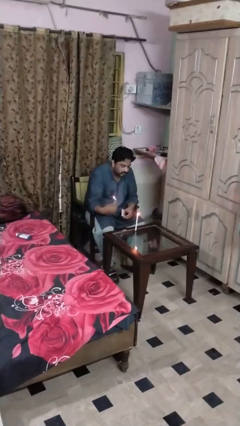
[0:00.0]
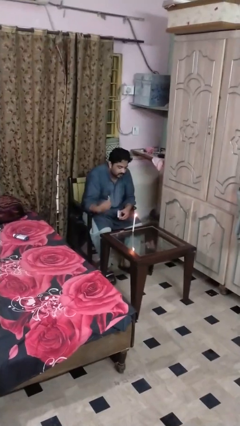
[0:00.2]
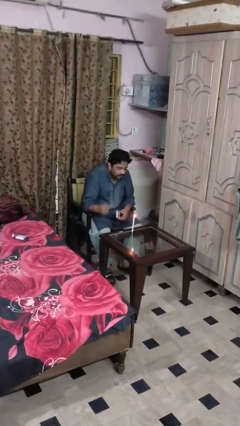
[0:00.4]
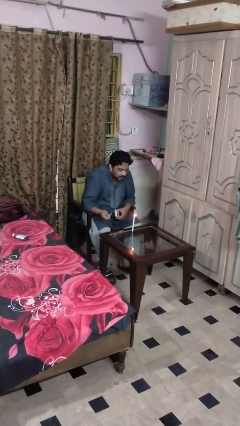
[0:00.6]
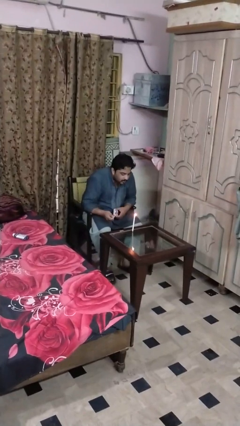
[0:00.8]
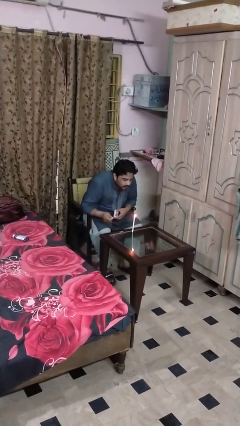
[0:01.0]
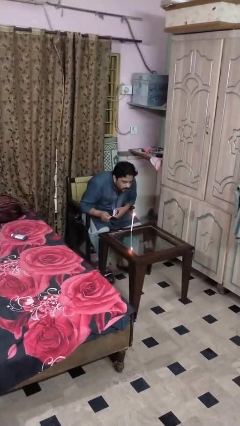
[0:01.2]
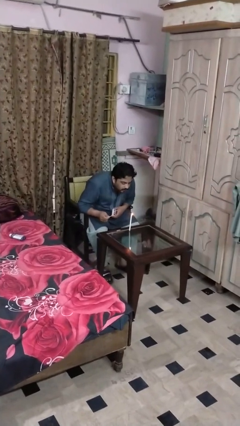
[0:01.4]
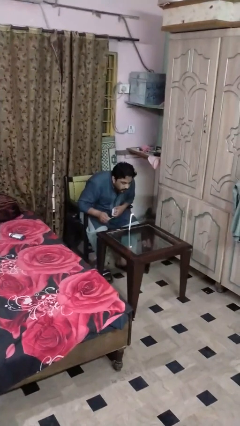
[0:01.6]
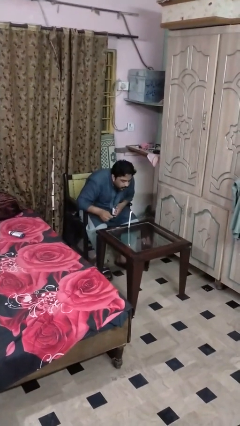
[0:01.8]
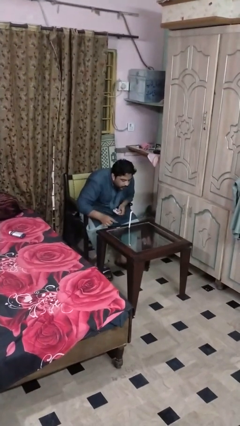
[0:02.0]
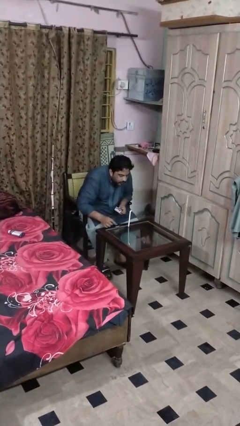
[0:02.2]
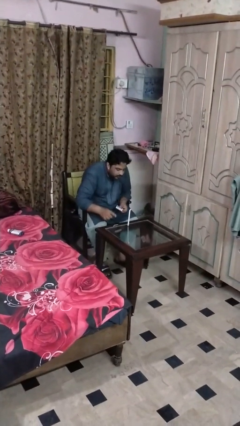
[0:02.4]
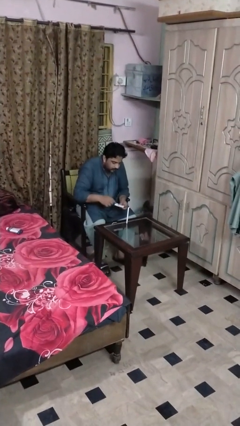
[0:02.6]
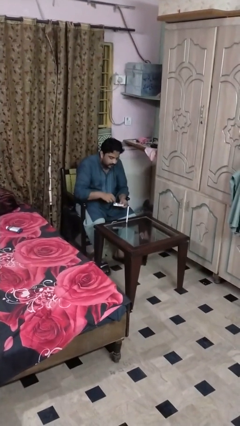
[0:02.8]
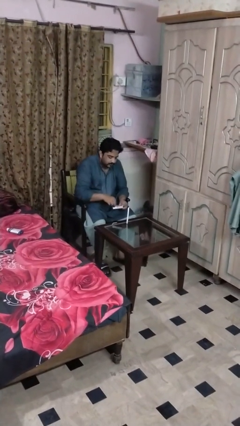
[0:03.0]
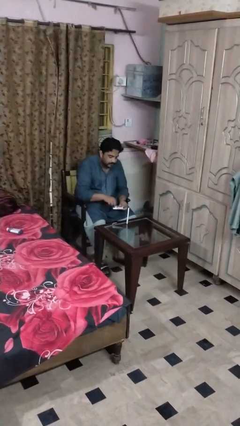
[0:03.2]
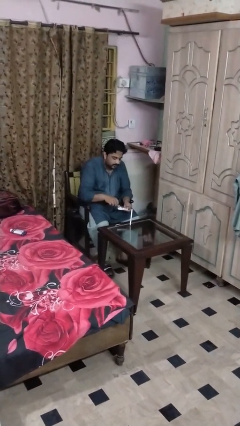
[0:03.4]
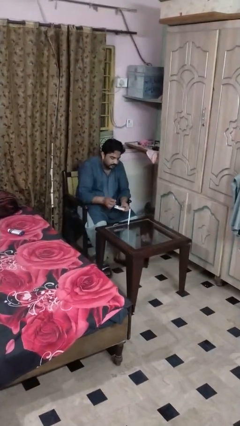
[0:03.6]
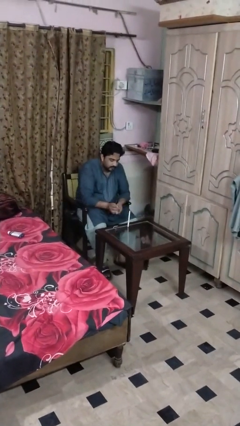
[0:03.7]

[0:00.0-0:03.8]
person extinguishes candle

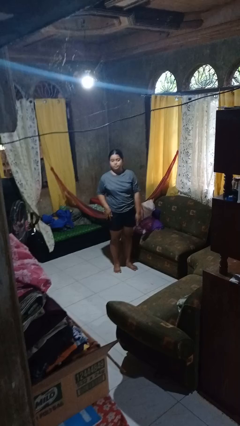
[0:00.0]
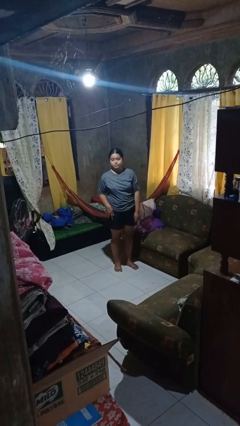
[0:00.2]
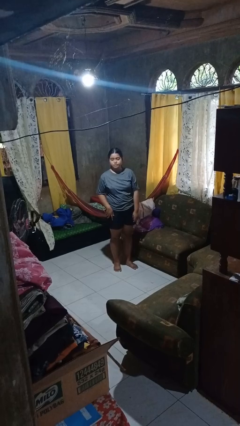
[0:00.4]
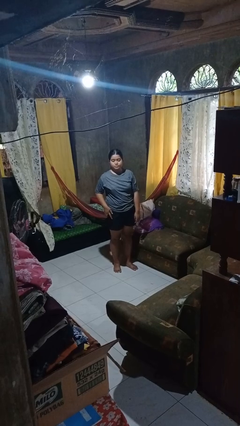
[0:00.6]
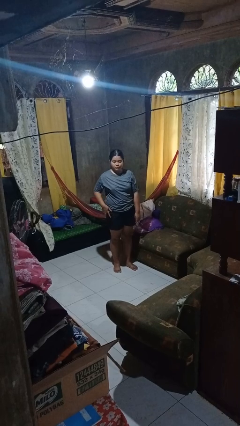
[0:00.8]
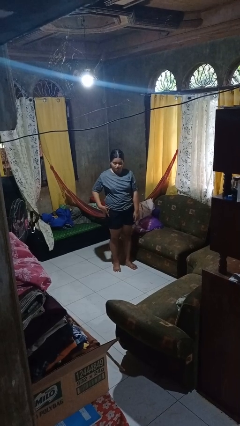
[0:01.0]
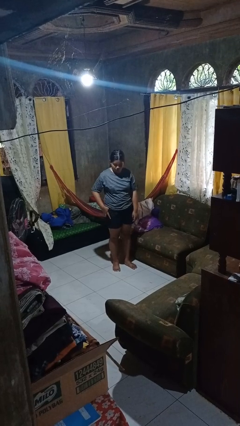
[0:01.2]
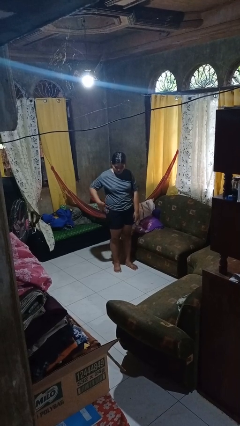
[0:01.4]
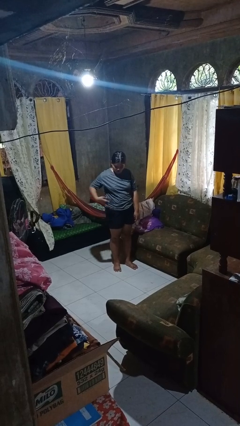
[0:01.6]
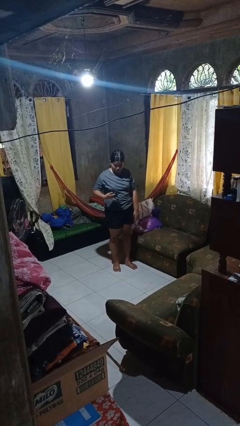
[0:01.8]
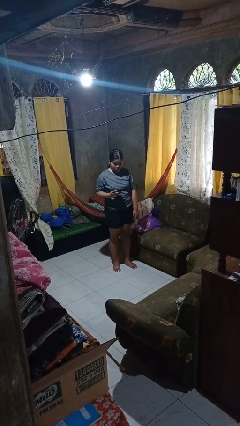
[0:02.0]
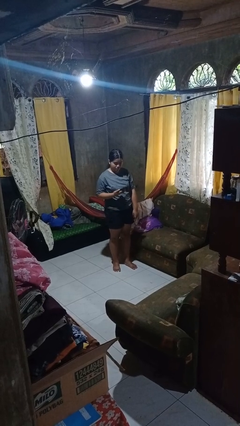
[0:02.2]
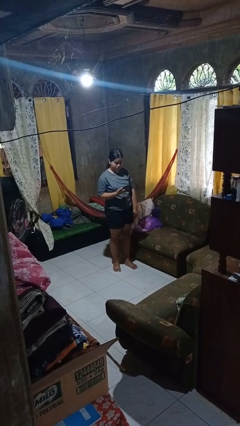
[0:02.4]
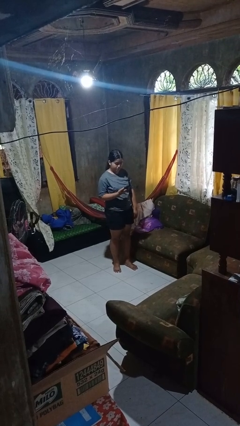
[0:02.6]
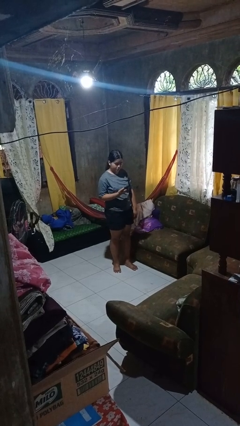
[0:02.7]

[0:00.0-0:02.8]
person takes phone from pocket

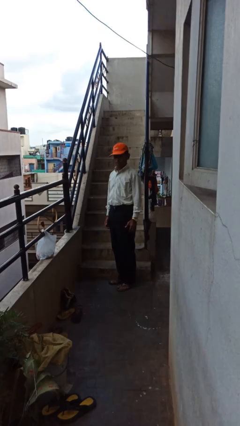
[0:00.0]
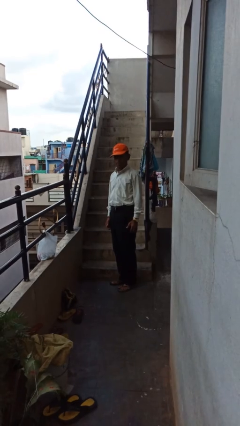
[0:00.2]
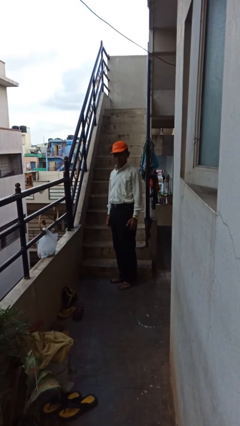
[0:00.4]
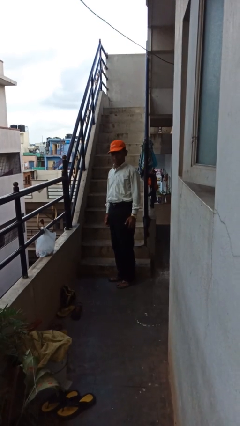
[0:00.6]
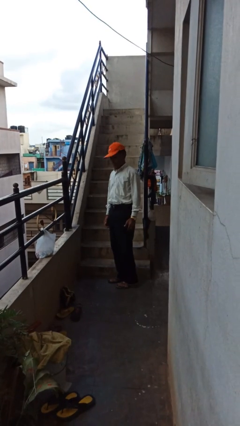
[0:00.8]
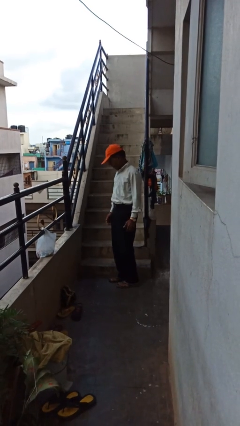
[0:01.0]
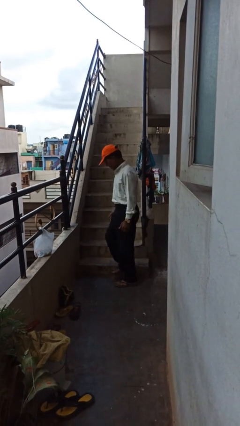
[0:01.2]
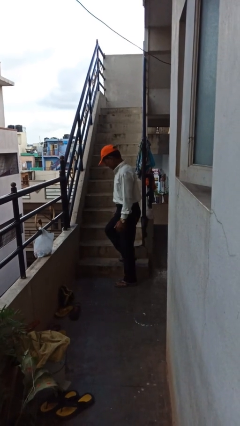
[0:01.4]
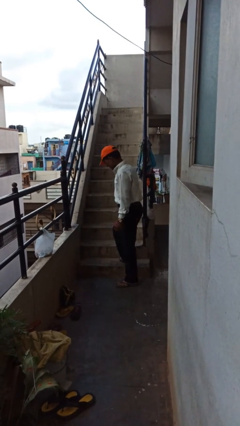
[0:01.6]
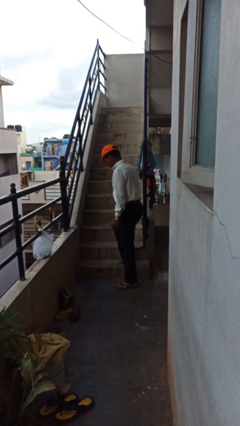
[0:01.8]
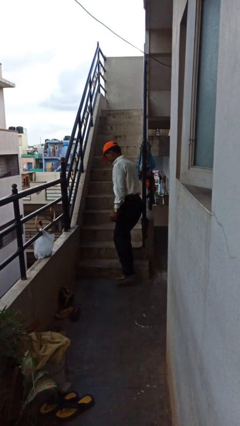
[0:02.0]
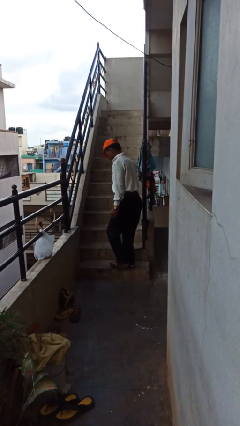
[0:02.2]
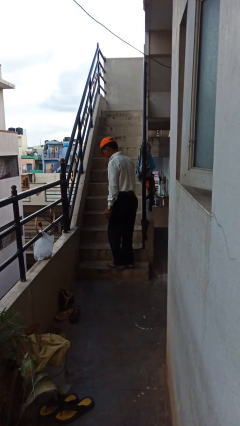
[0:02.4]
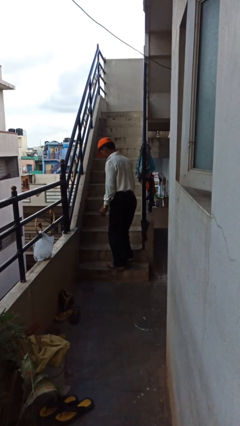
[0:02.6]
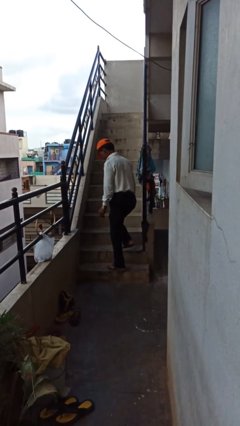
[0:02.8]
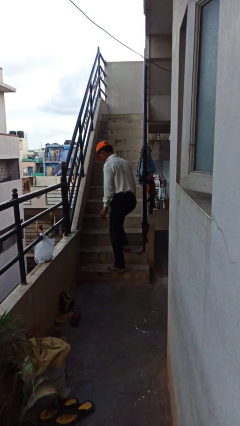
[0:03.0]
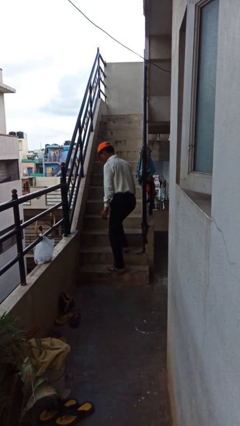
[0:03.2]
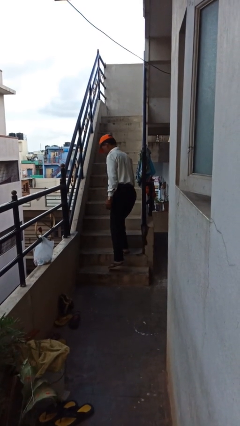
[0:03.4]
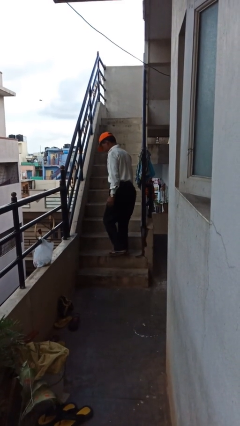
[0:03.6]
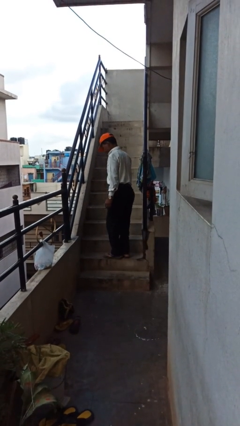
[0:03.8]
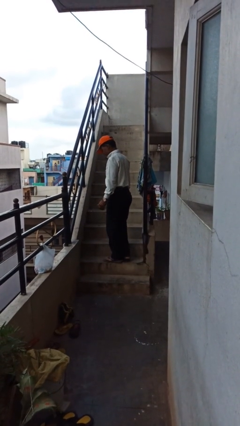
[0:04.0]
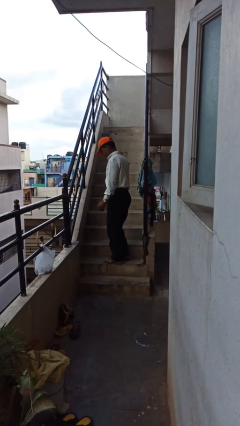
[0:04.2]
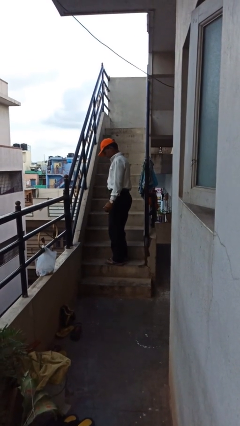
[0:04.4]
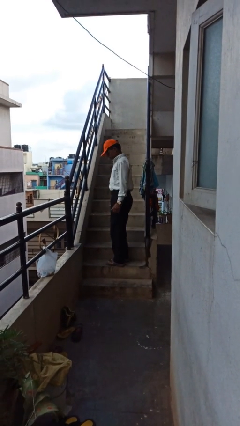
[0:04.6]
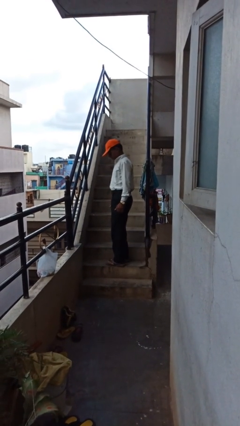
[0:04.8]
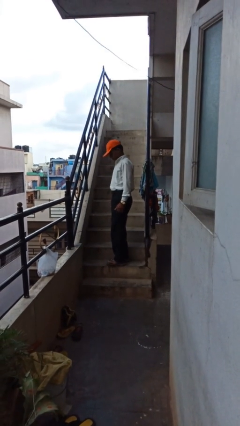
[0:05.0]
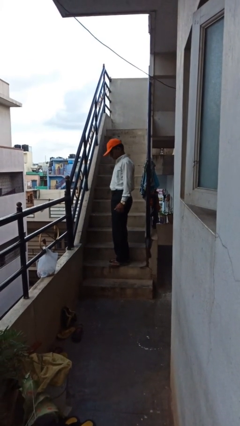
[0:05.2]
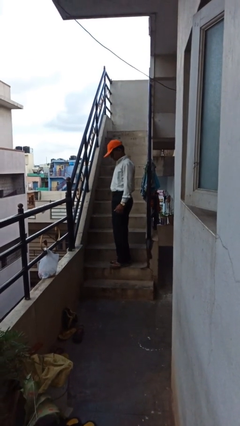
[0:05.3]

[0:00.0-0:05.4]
person climbs up stairs

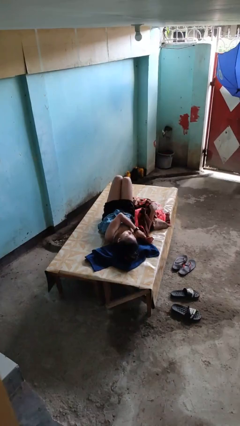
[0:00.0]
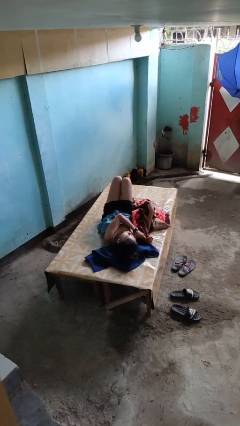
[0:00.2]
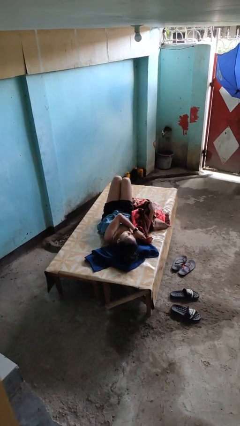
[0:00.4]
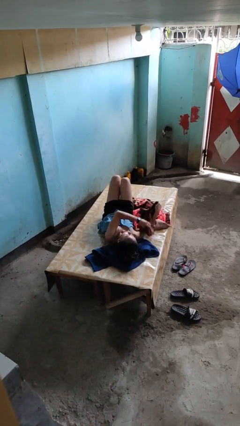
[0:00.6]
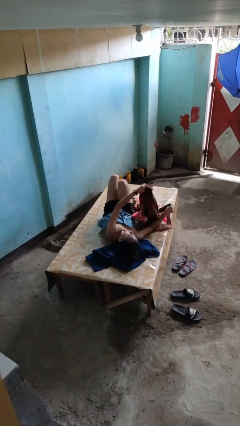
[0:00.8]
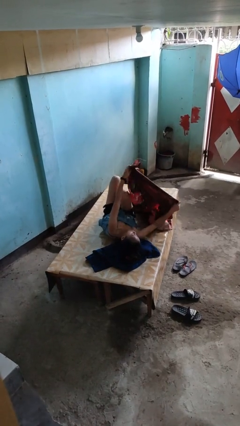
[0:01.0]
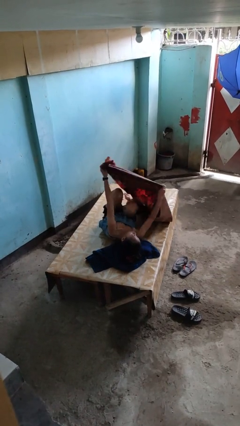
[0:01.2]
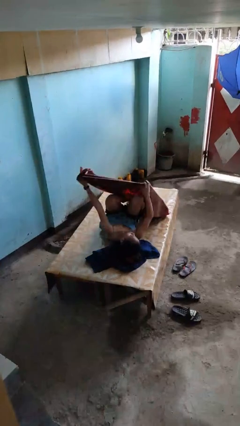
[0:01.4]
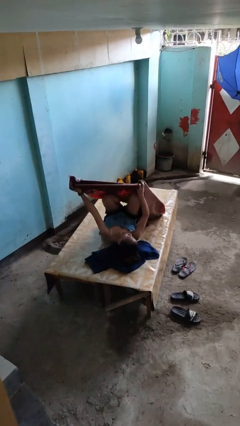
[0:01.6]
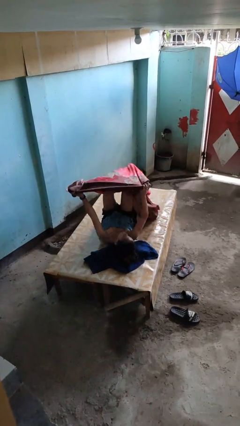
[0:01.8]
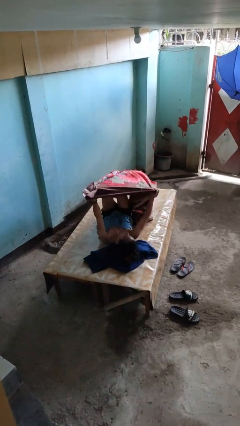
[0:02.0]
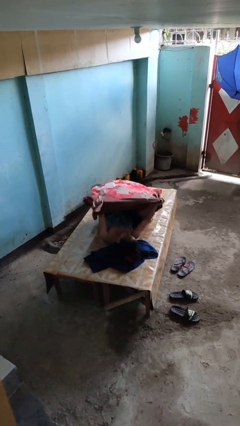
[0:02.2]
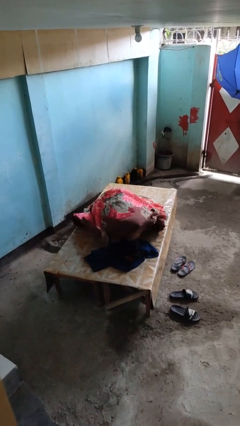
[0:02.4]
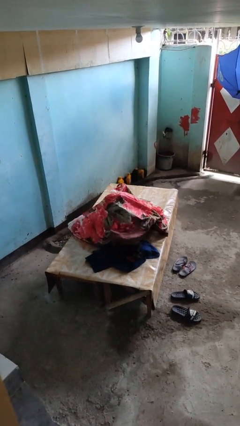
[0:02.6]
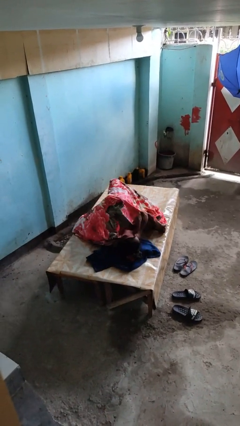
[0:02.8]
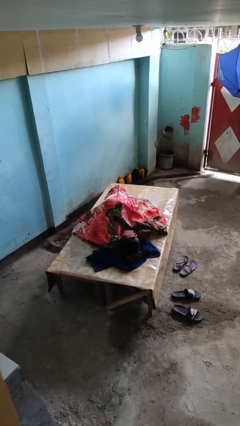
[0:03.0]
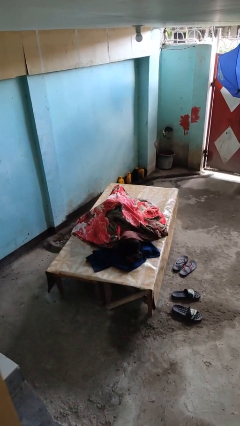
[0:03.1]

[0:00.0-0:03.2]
person covers with blanket

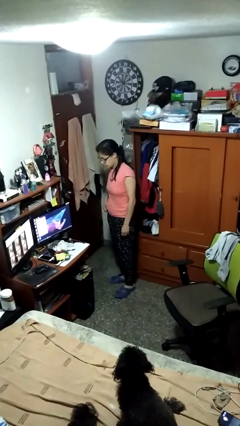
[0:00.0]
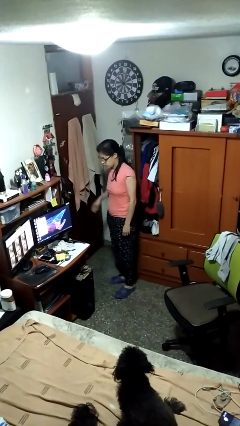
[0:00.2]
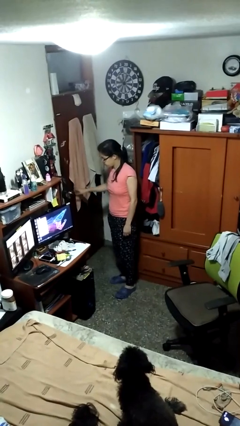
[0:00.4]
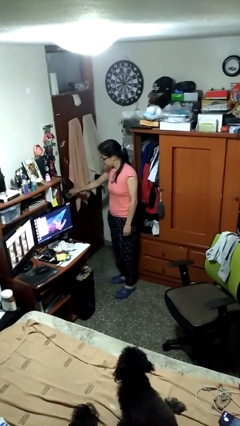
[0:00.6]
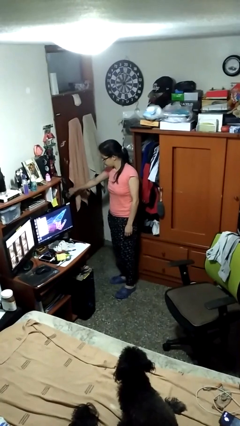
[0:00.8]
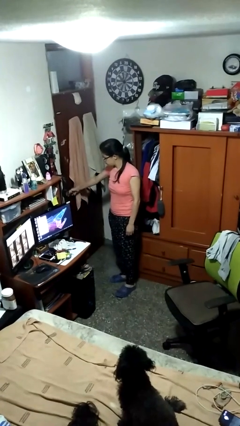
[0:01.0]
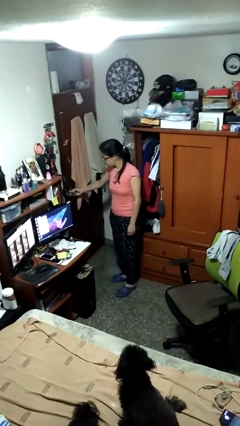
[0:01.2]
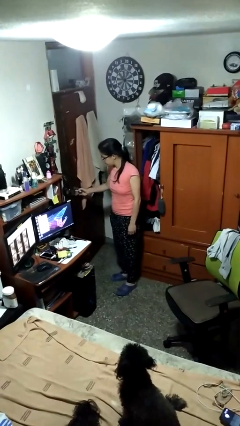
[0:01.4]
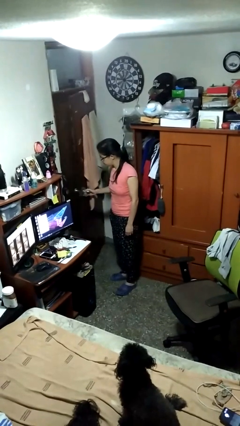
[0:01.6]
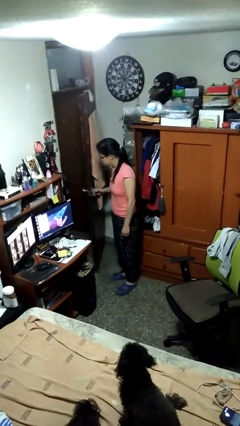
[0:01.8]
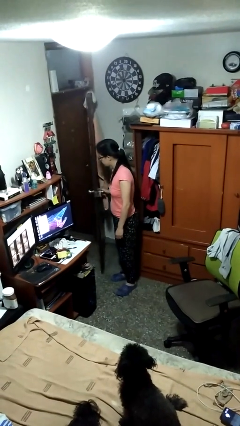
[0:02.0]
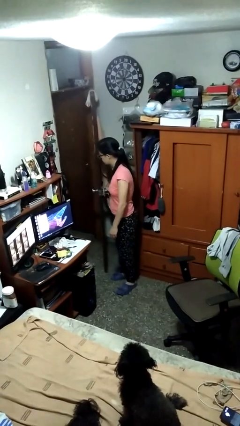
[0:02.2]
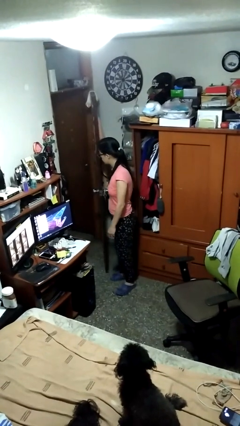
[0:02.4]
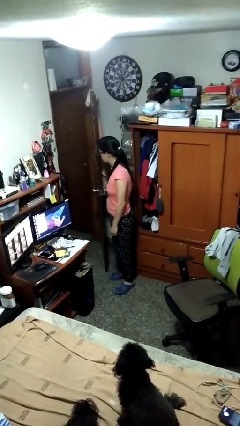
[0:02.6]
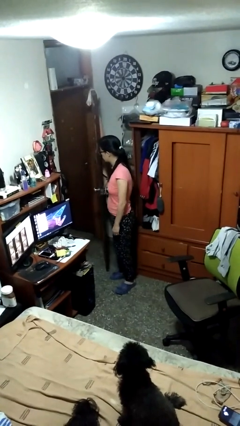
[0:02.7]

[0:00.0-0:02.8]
person opens facility door
